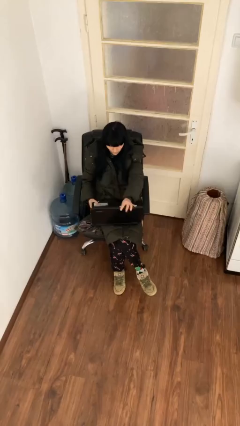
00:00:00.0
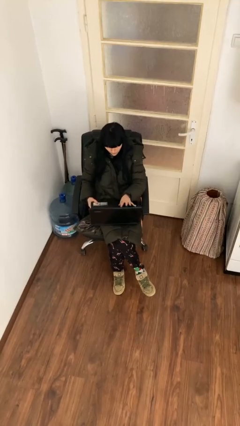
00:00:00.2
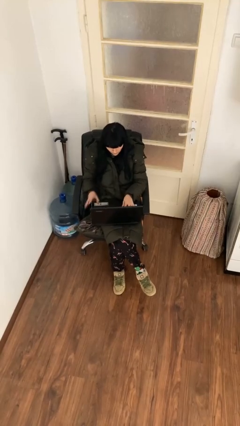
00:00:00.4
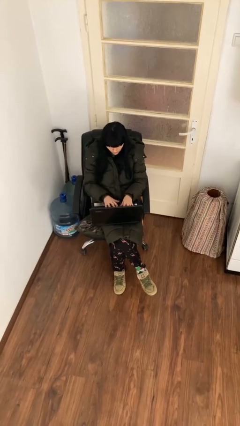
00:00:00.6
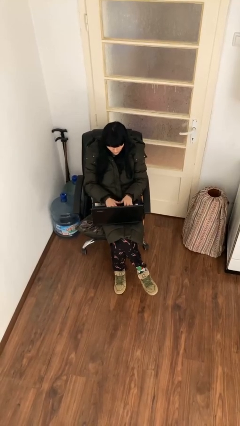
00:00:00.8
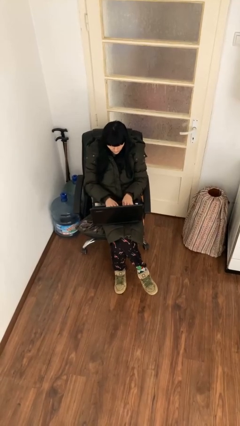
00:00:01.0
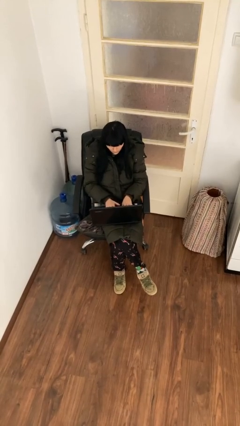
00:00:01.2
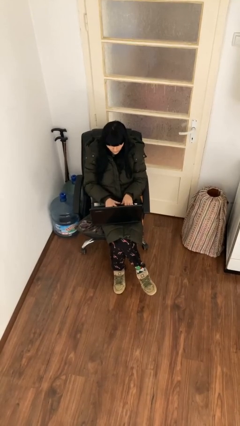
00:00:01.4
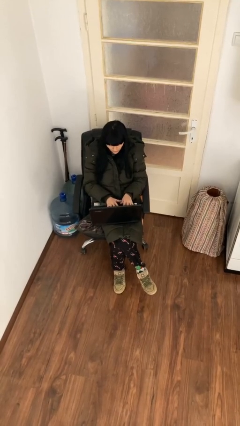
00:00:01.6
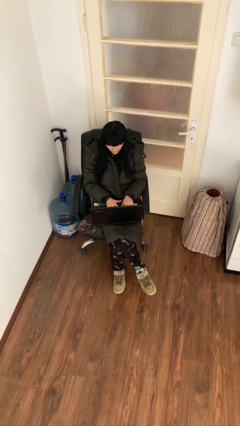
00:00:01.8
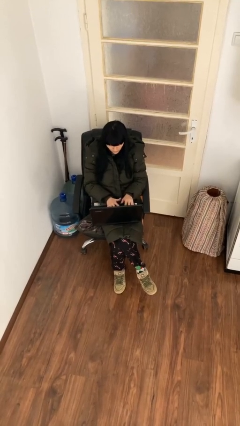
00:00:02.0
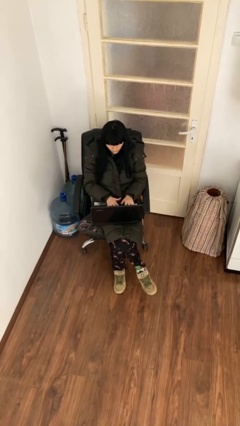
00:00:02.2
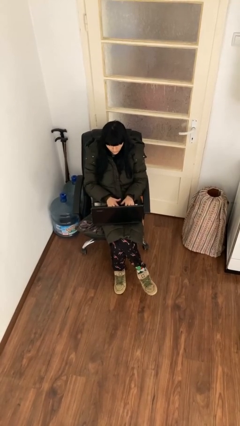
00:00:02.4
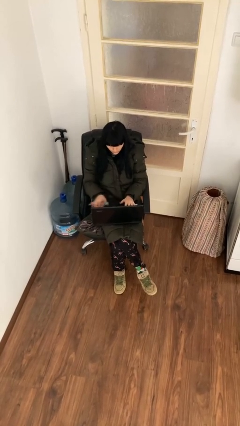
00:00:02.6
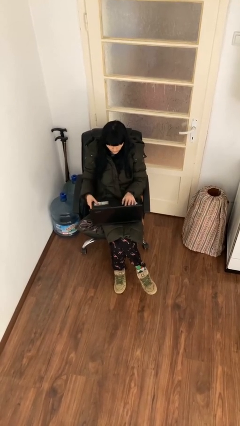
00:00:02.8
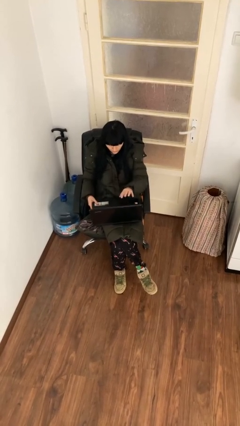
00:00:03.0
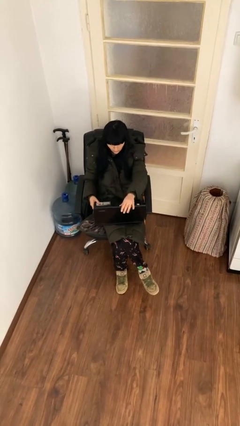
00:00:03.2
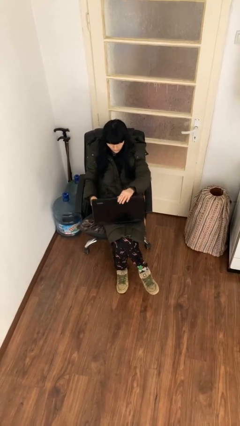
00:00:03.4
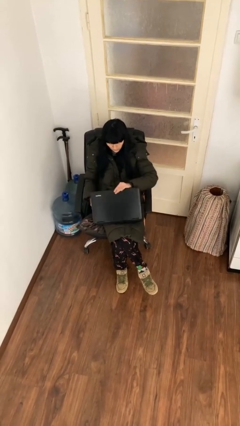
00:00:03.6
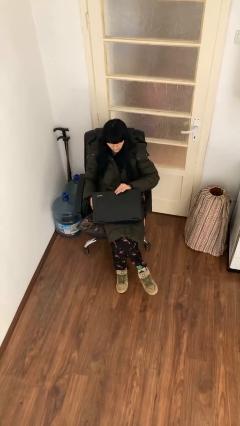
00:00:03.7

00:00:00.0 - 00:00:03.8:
person interacts with laptop

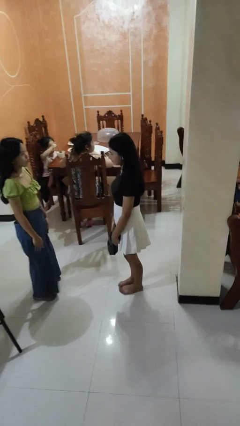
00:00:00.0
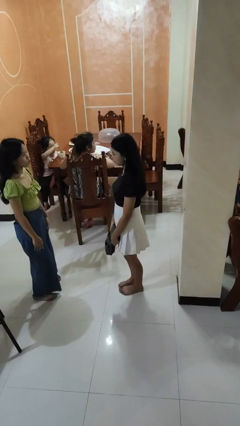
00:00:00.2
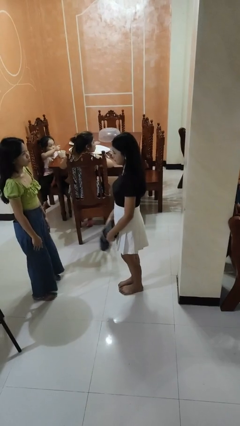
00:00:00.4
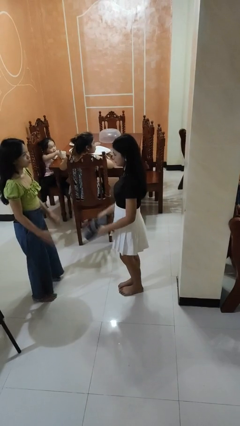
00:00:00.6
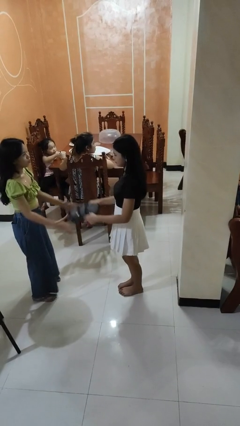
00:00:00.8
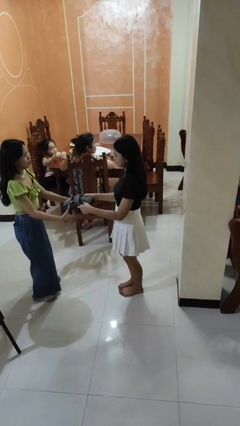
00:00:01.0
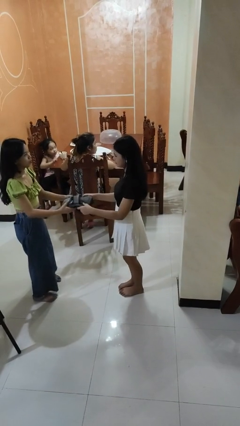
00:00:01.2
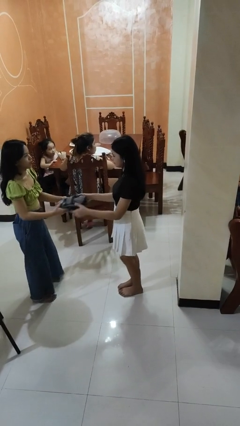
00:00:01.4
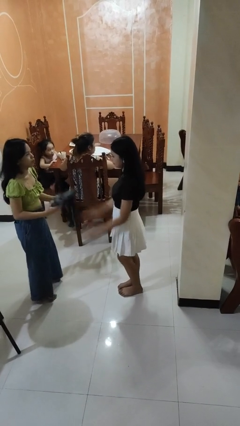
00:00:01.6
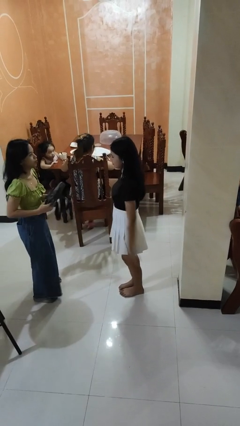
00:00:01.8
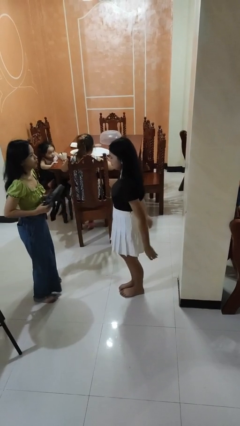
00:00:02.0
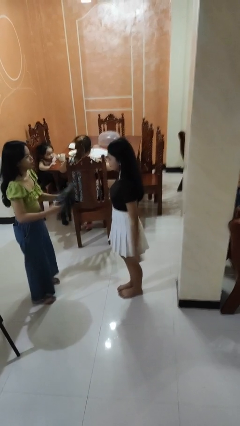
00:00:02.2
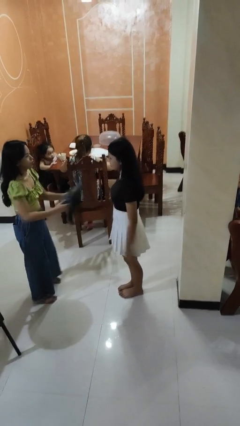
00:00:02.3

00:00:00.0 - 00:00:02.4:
person transfers object to person

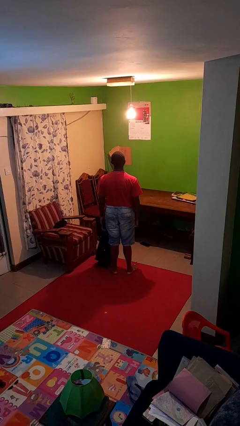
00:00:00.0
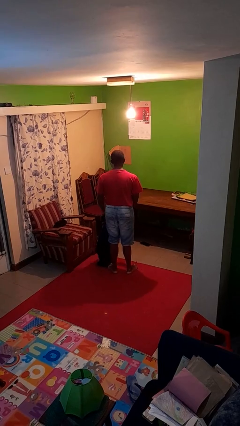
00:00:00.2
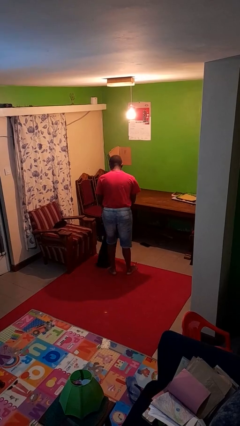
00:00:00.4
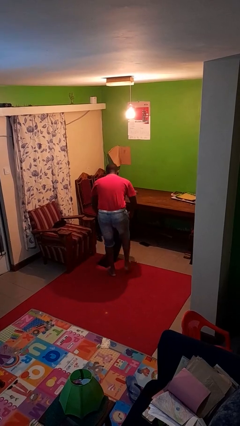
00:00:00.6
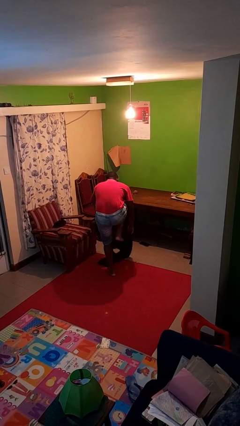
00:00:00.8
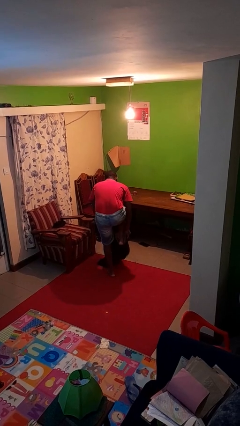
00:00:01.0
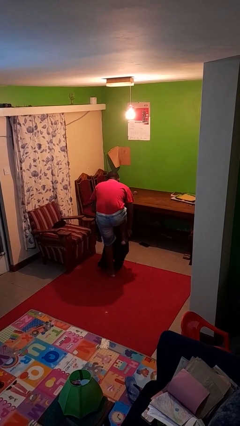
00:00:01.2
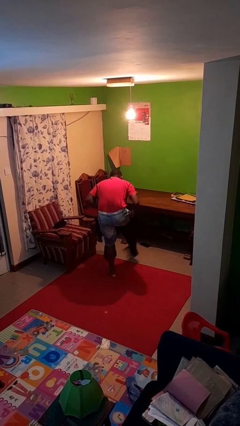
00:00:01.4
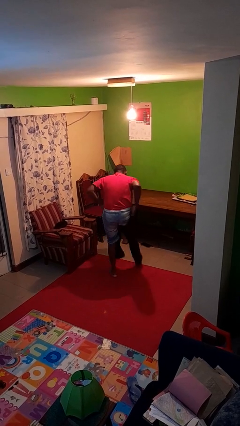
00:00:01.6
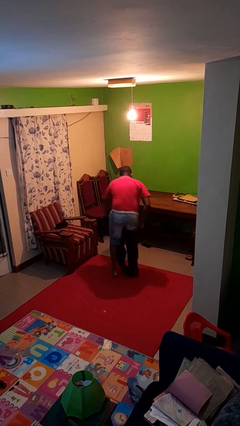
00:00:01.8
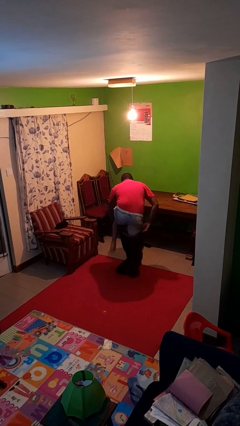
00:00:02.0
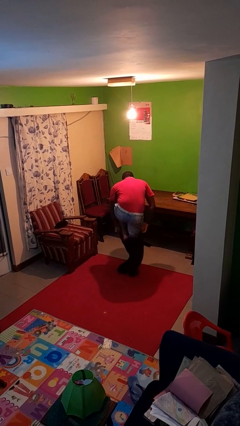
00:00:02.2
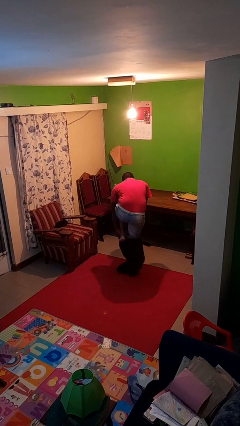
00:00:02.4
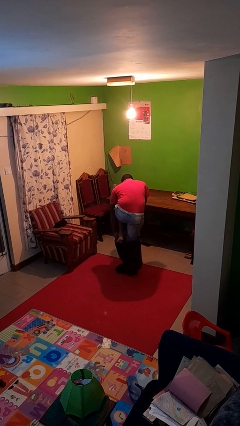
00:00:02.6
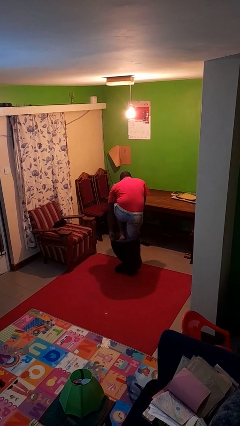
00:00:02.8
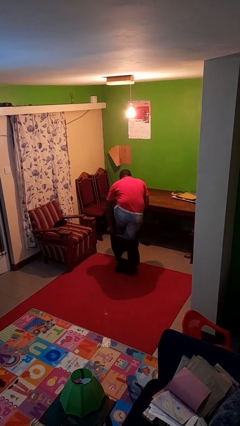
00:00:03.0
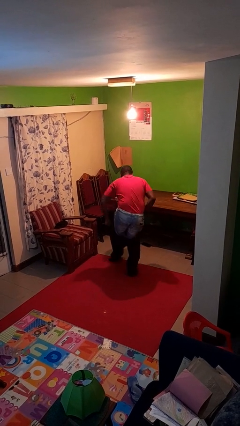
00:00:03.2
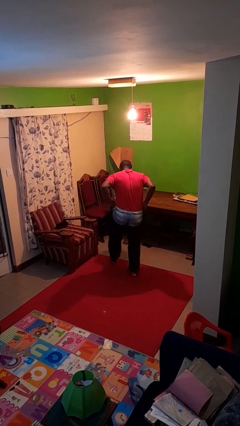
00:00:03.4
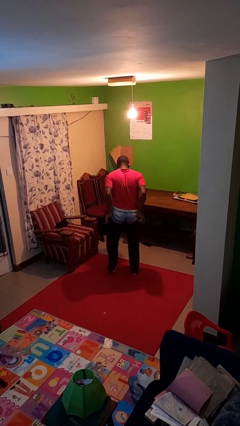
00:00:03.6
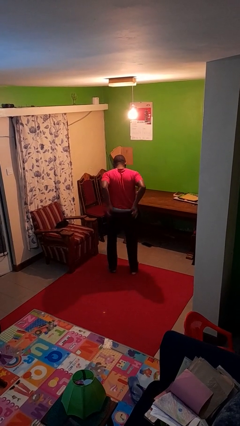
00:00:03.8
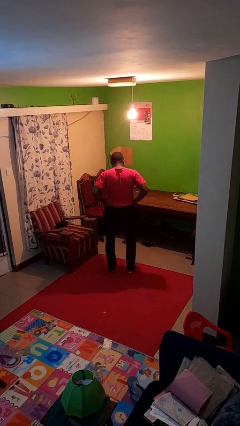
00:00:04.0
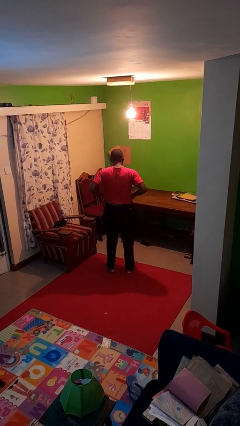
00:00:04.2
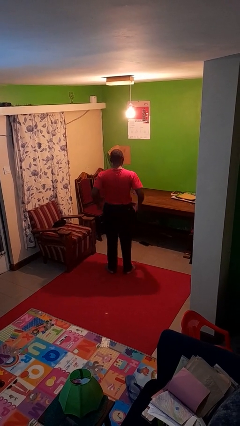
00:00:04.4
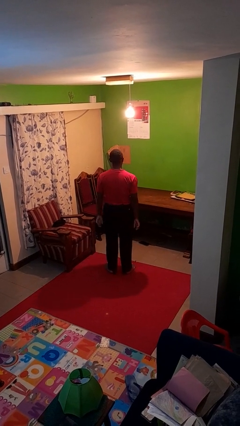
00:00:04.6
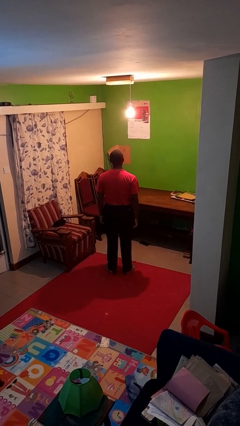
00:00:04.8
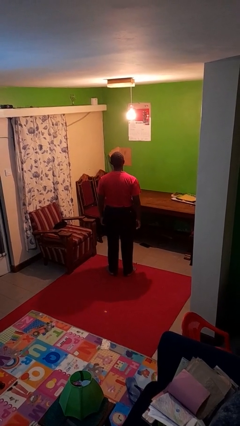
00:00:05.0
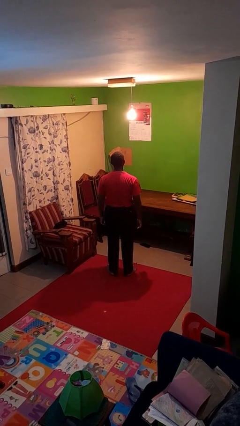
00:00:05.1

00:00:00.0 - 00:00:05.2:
person puts on pants

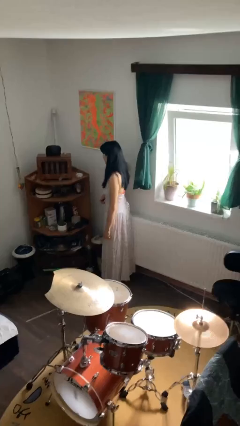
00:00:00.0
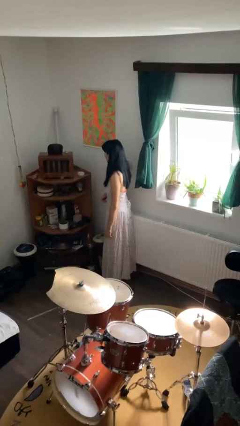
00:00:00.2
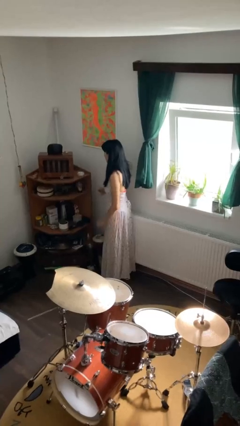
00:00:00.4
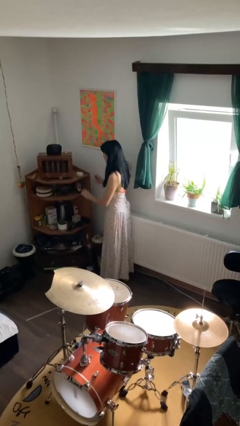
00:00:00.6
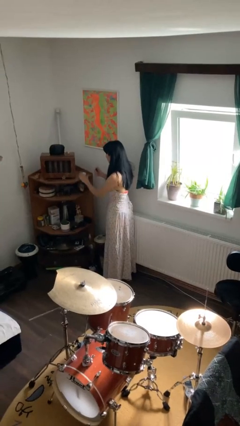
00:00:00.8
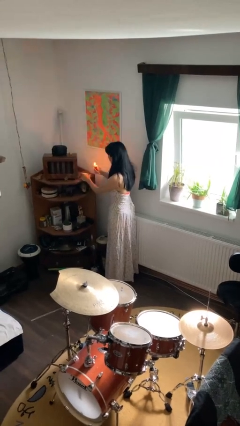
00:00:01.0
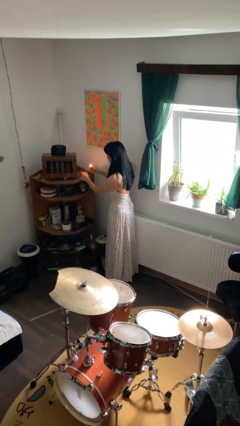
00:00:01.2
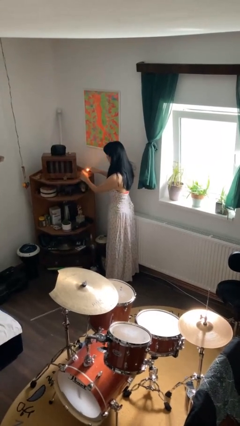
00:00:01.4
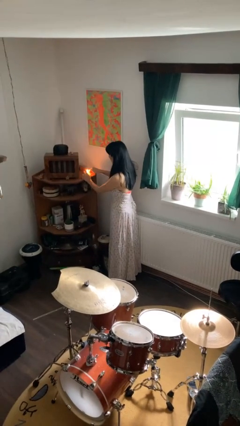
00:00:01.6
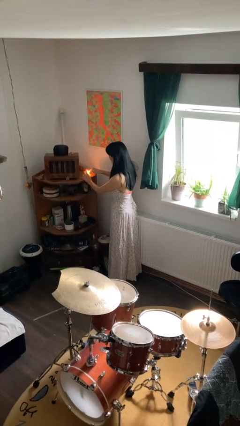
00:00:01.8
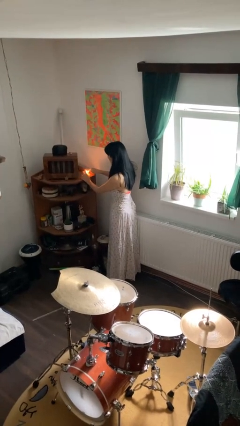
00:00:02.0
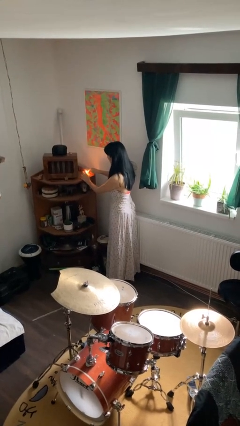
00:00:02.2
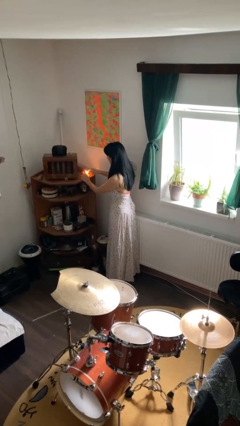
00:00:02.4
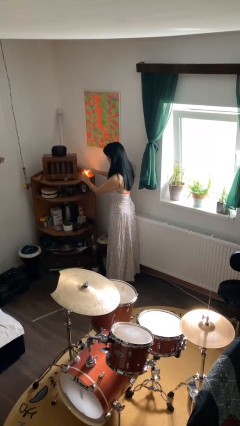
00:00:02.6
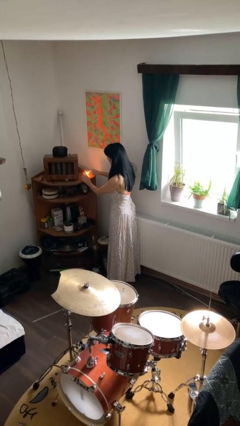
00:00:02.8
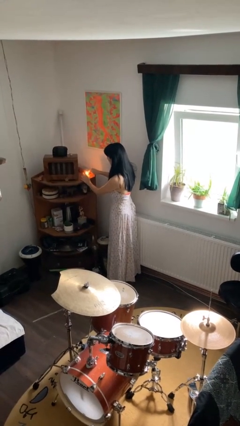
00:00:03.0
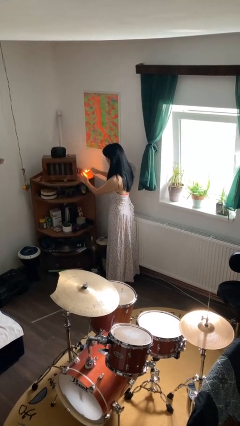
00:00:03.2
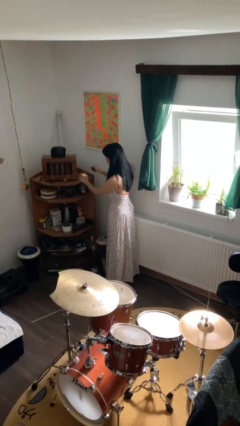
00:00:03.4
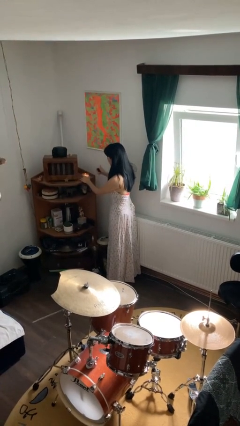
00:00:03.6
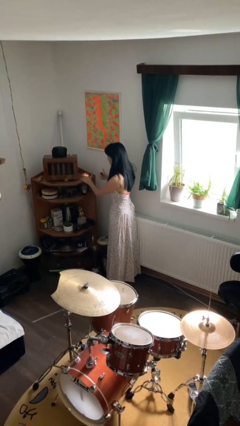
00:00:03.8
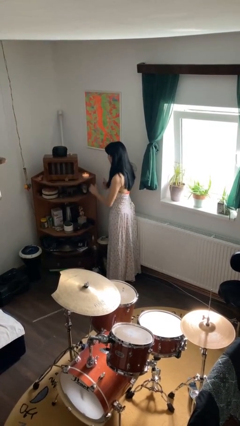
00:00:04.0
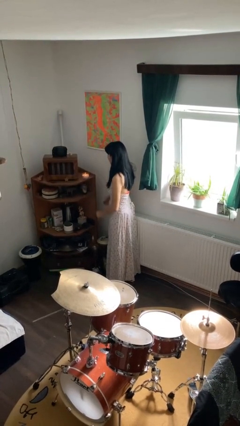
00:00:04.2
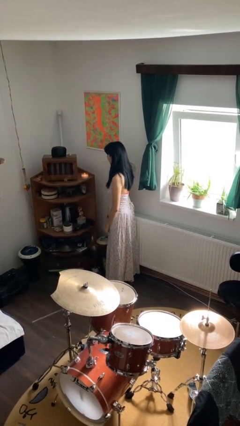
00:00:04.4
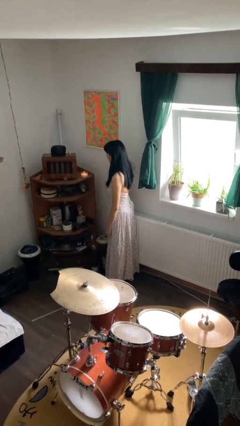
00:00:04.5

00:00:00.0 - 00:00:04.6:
person lights candle

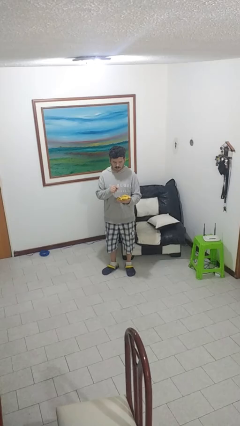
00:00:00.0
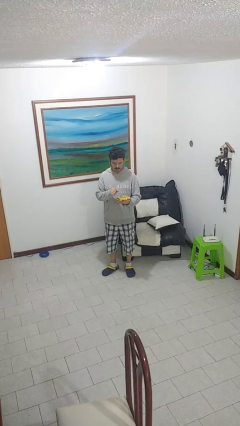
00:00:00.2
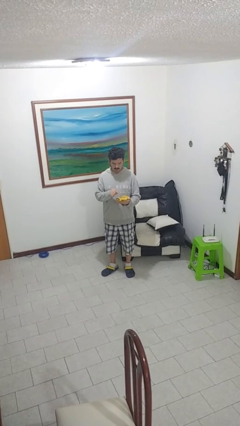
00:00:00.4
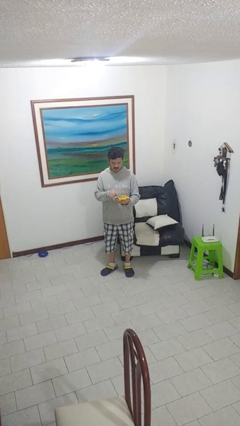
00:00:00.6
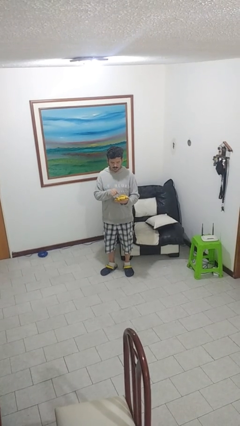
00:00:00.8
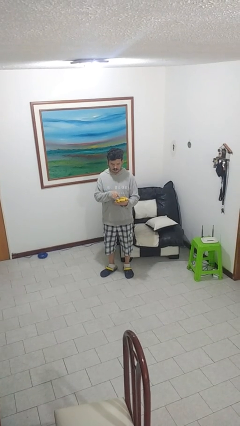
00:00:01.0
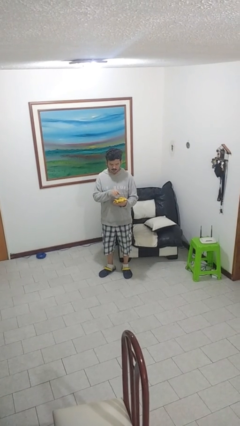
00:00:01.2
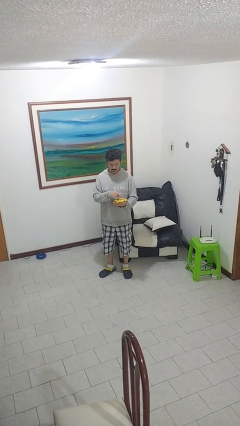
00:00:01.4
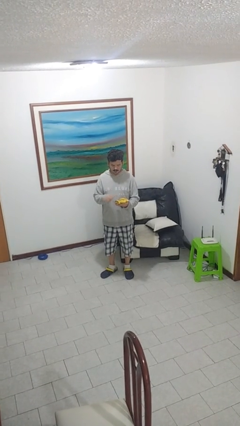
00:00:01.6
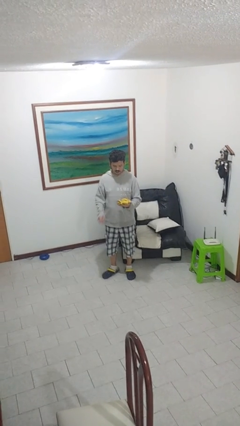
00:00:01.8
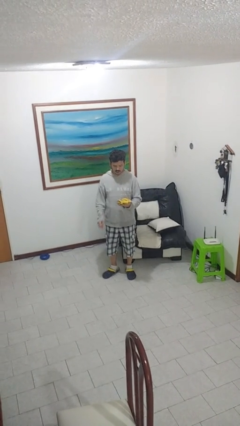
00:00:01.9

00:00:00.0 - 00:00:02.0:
person taps object with finger
